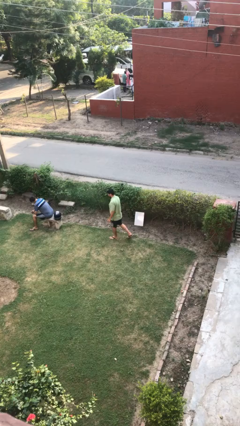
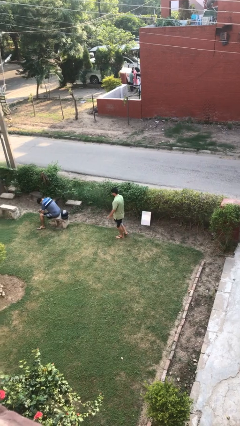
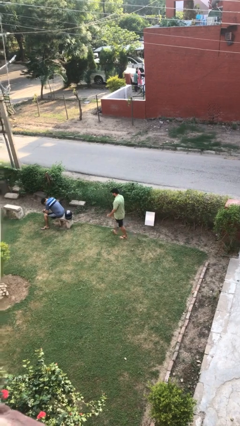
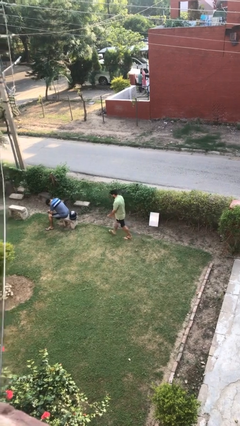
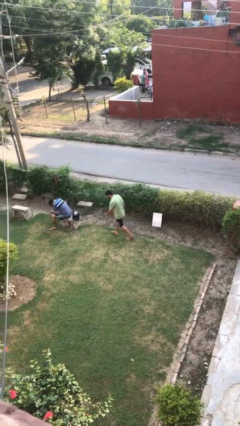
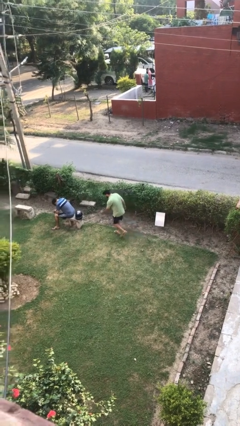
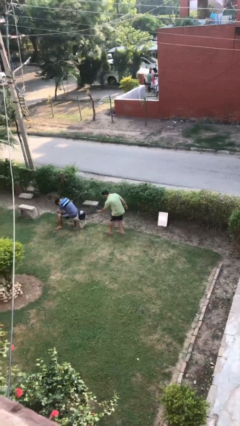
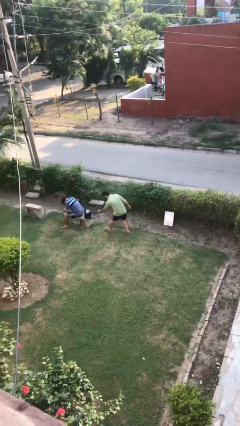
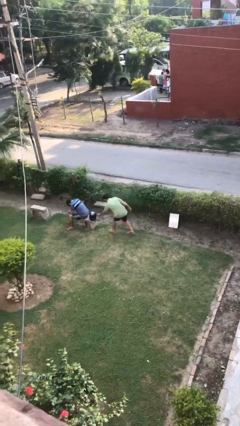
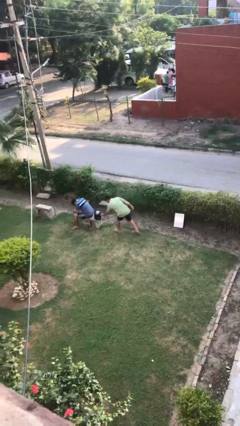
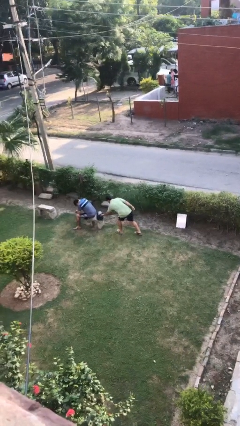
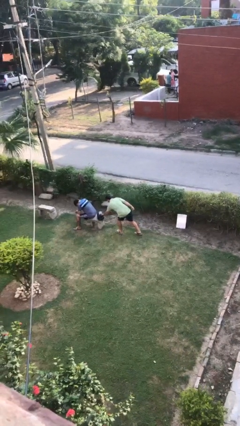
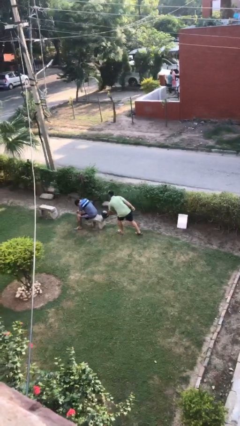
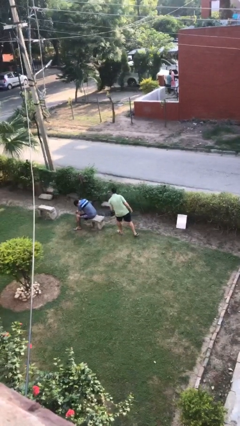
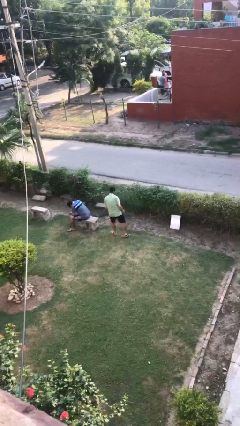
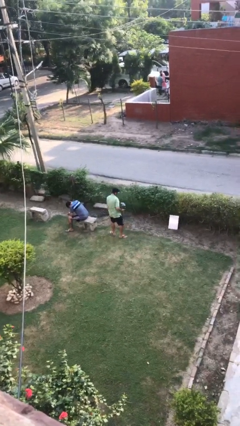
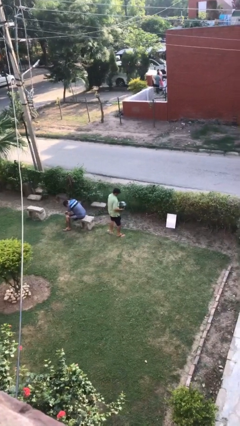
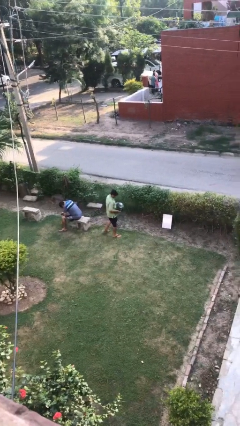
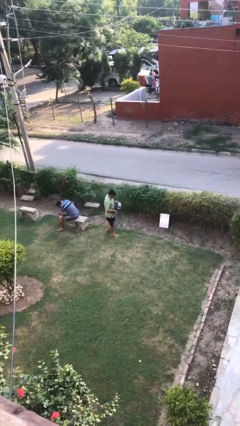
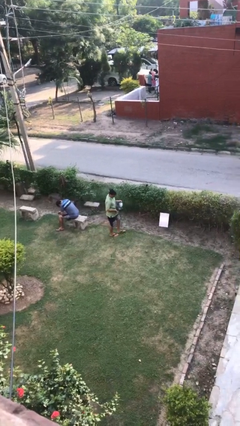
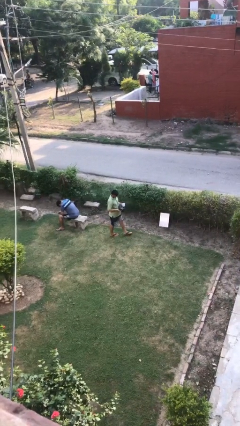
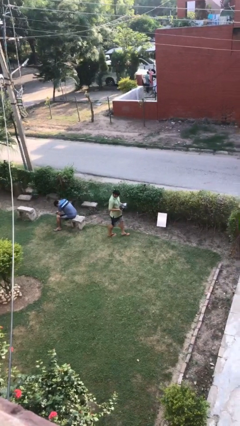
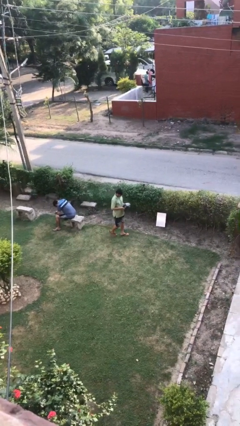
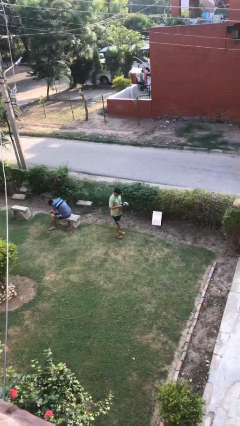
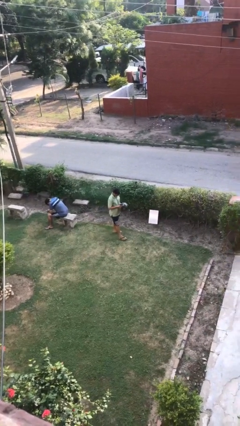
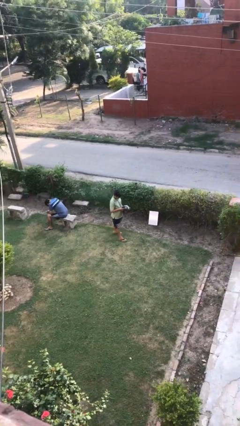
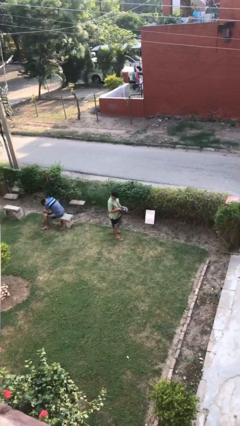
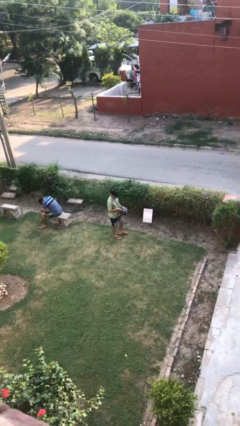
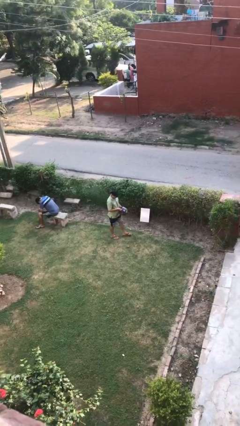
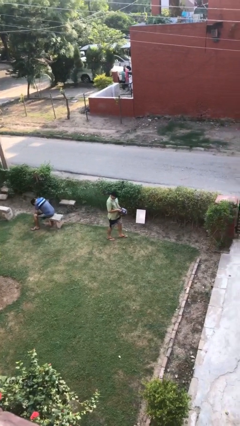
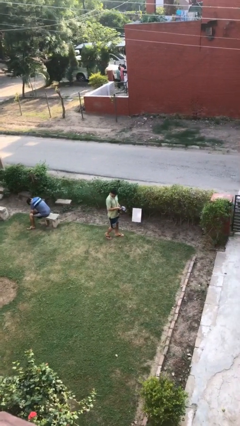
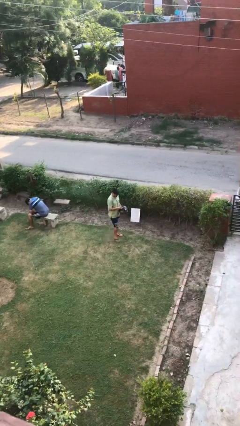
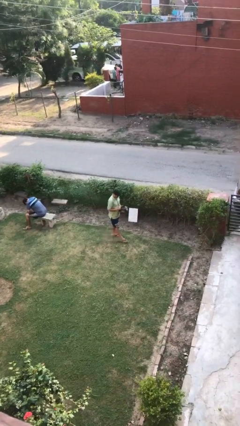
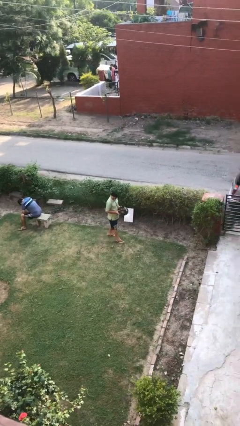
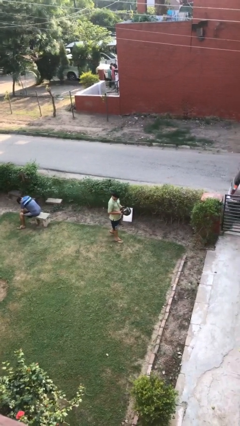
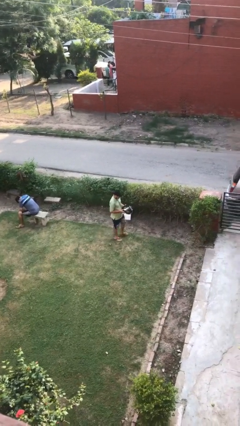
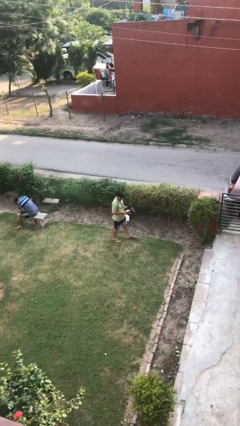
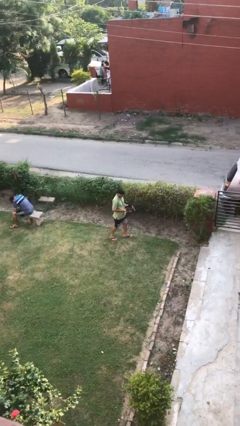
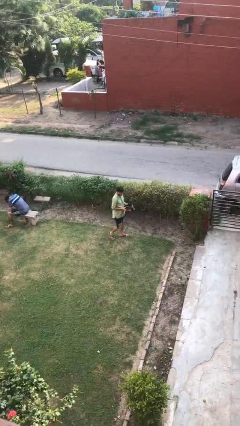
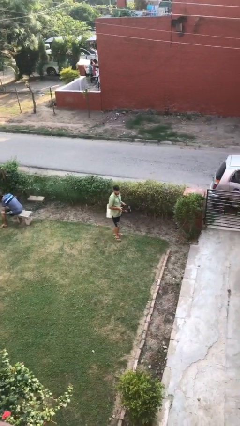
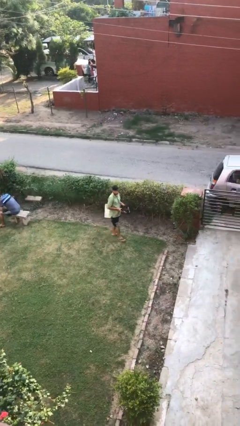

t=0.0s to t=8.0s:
person steals object from person

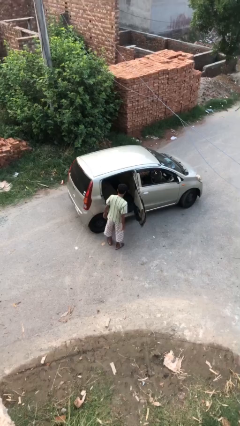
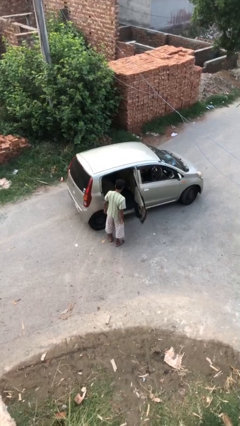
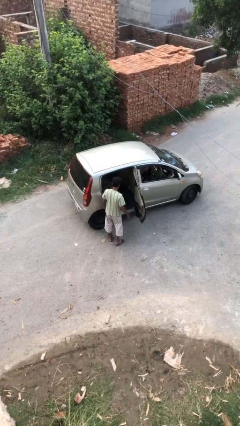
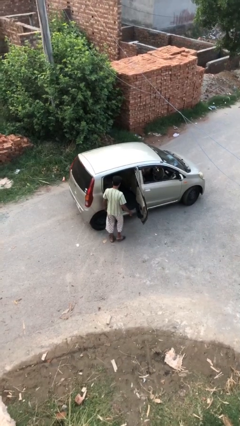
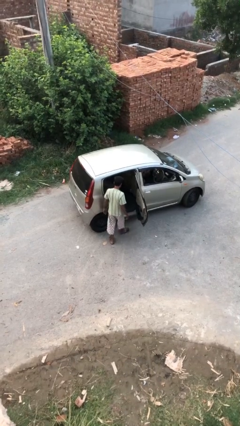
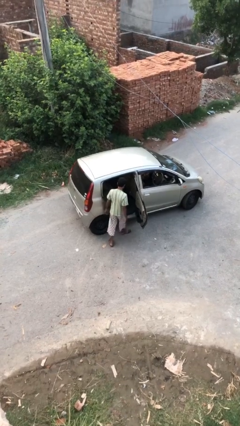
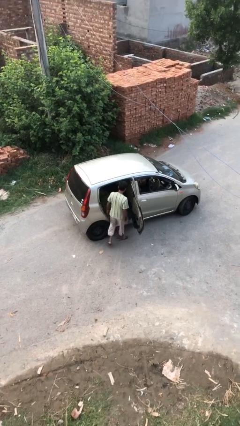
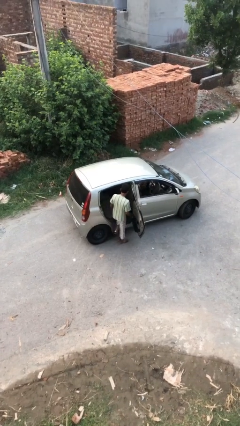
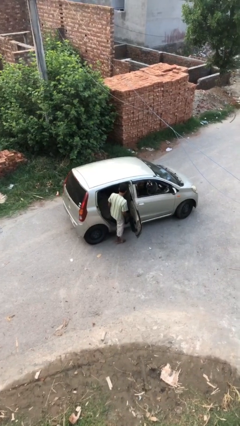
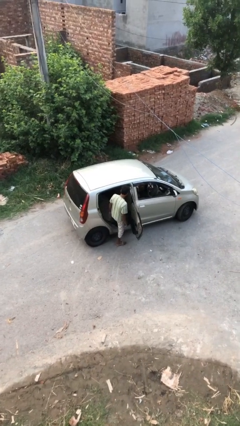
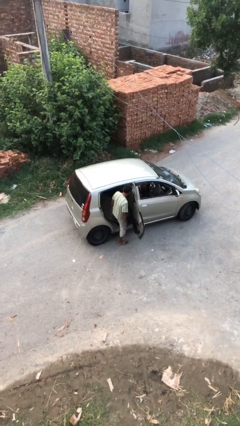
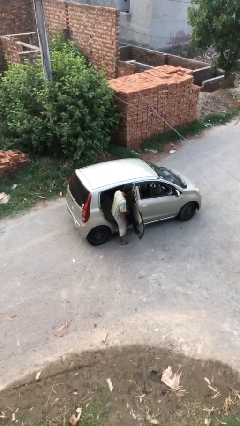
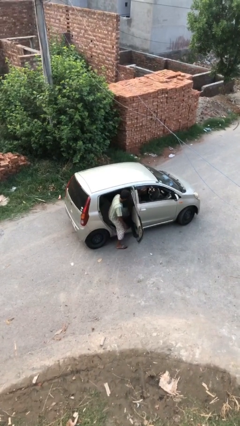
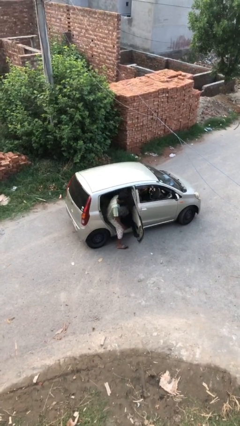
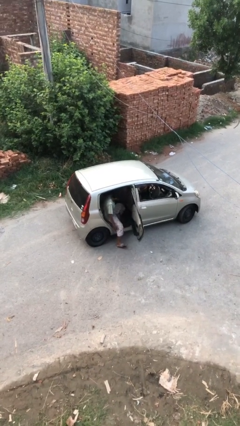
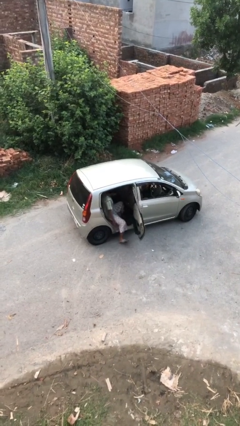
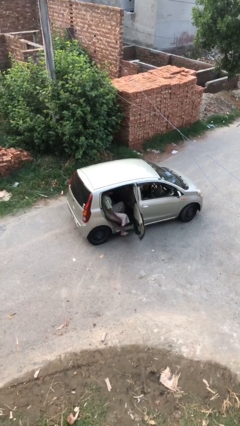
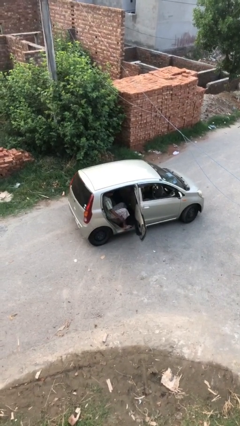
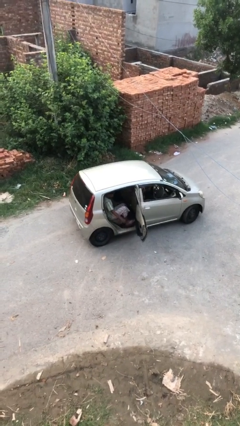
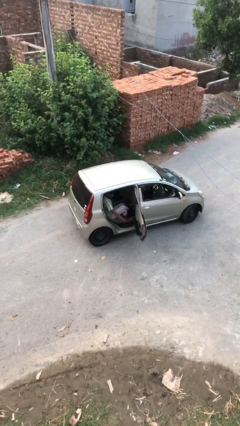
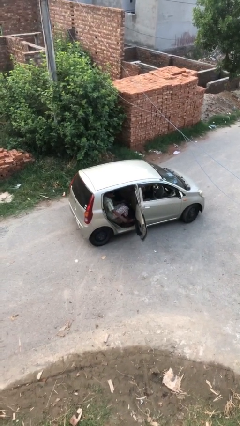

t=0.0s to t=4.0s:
person enters car

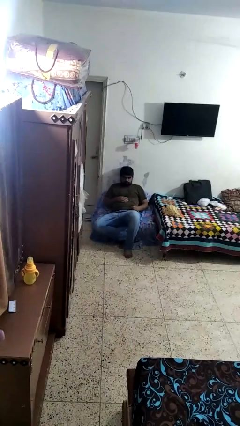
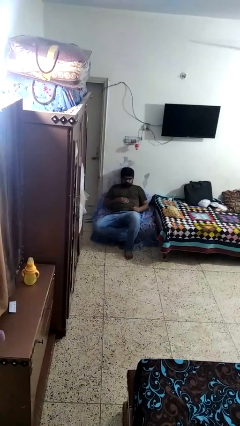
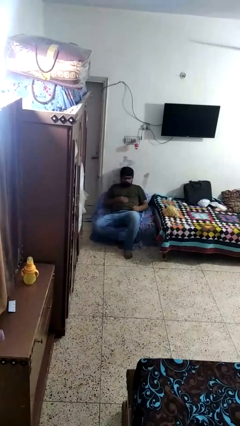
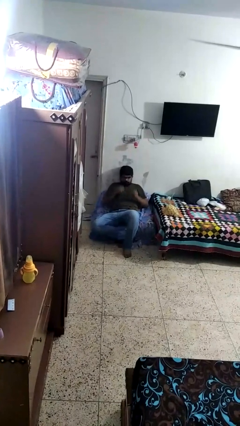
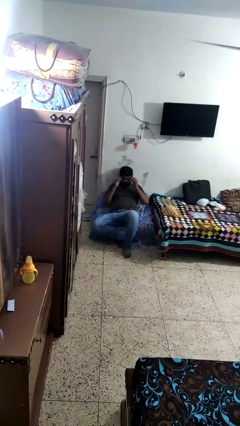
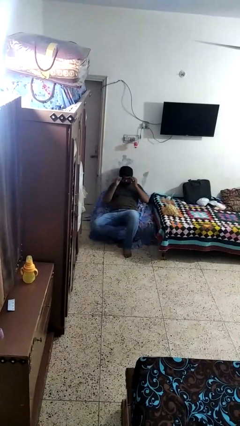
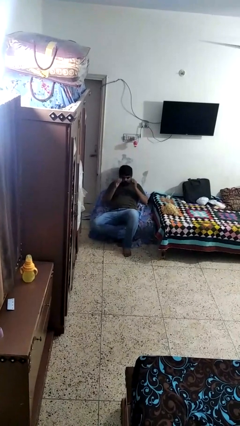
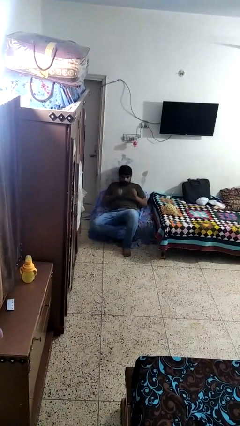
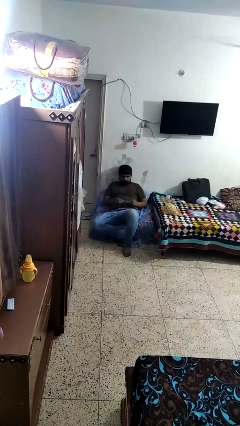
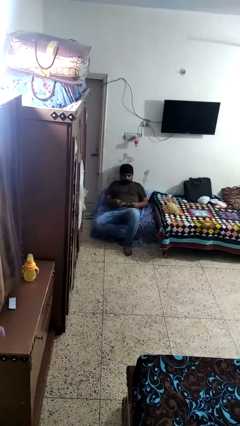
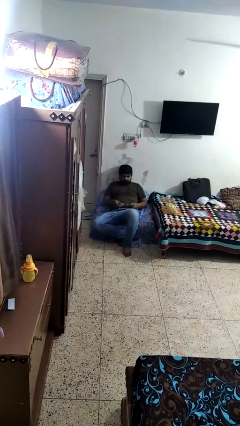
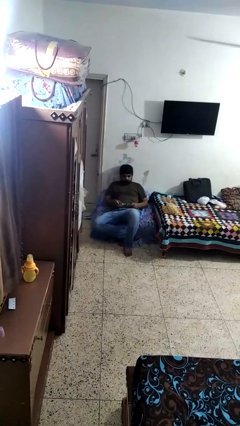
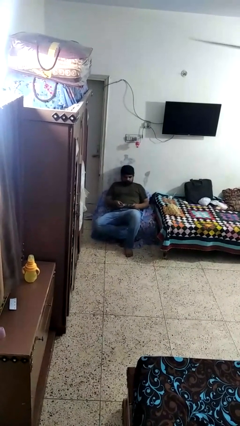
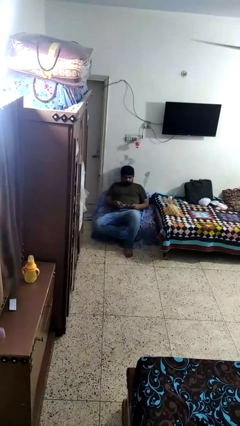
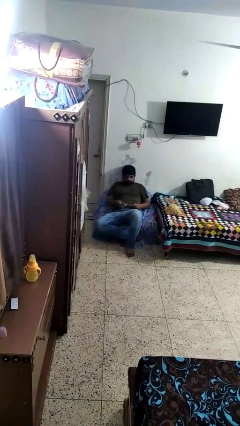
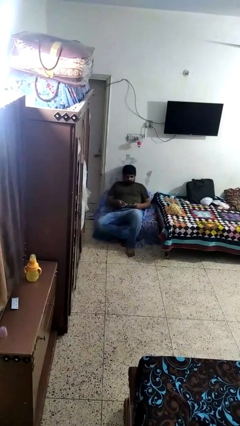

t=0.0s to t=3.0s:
person takes off glasses

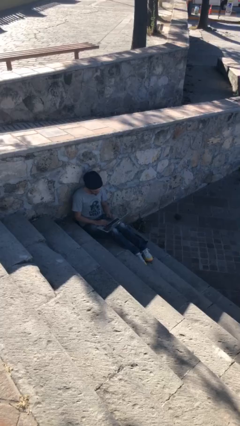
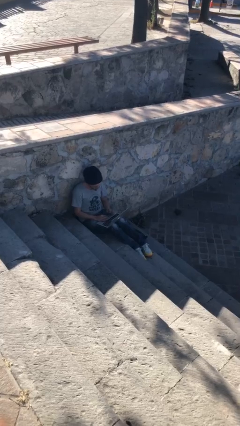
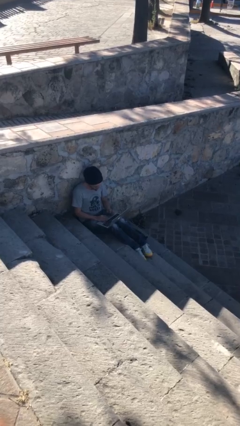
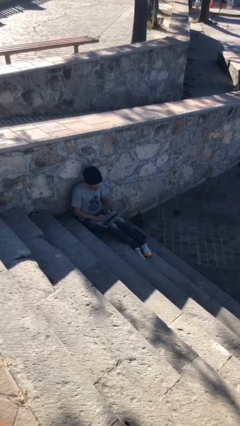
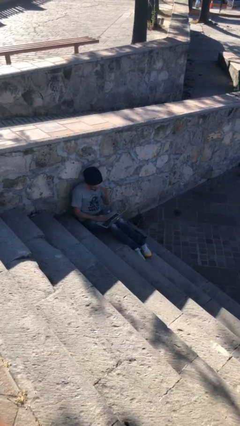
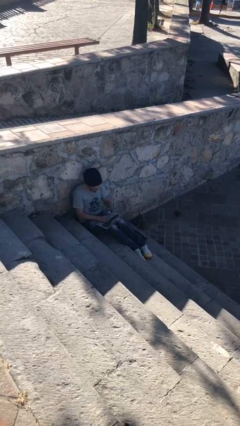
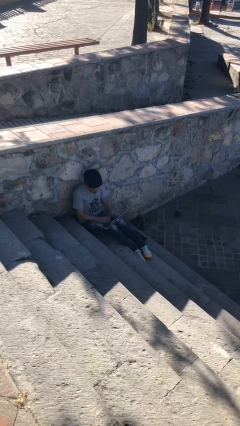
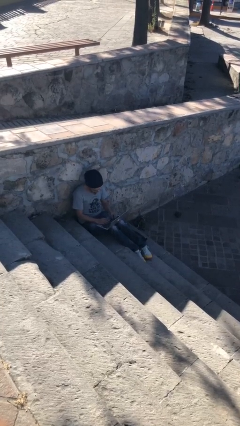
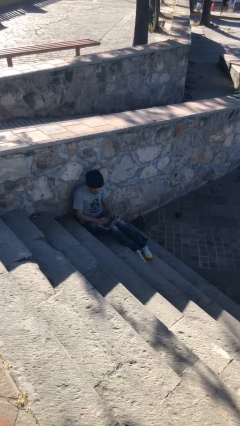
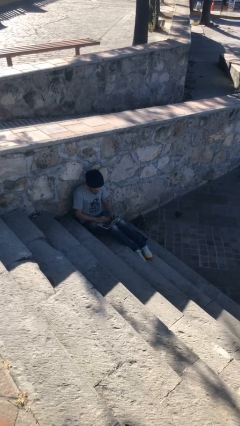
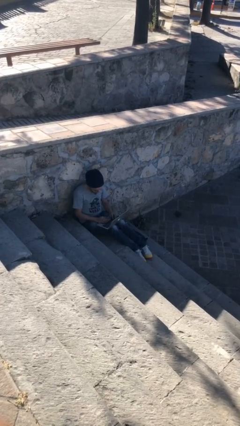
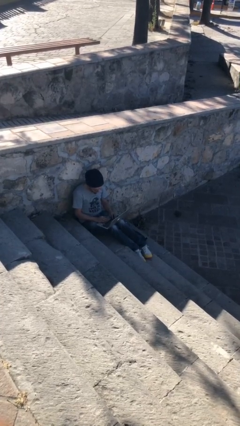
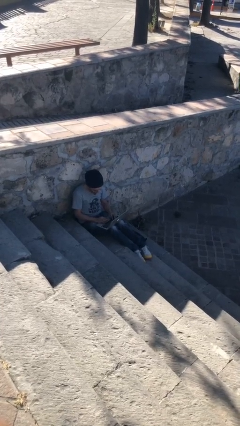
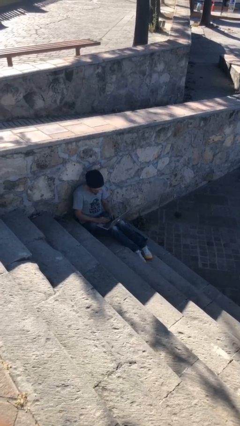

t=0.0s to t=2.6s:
person interacts with laptop
